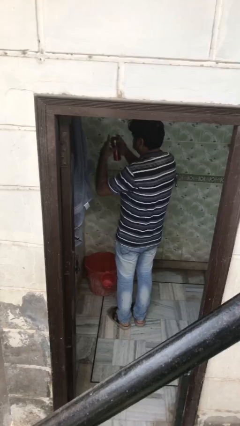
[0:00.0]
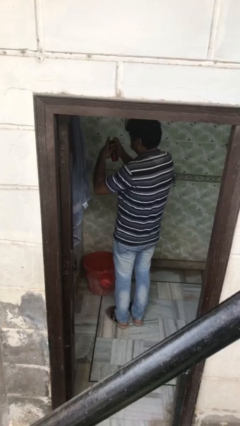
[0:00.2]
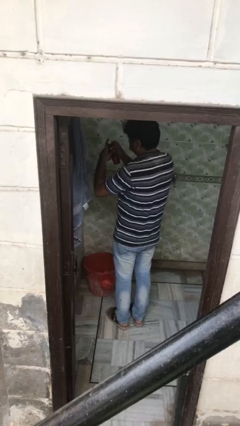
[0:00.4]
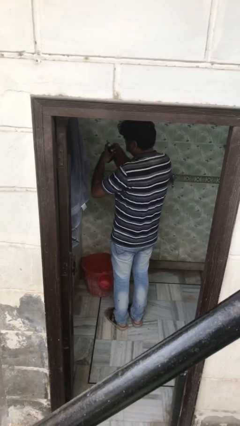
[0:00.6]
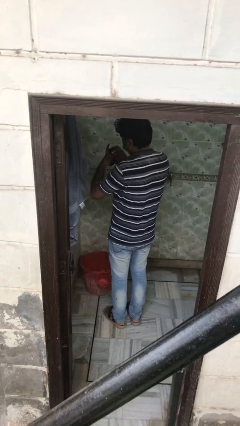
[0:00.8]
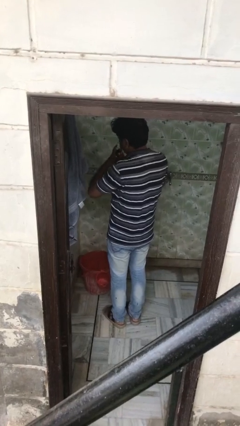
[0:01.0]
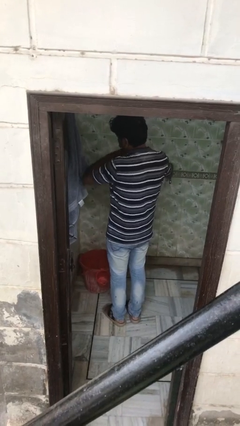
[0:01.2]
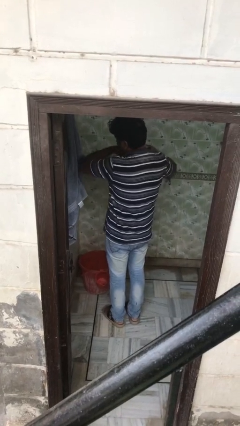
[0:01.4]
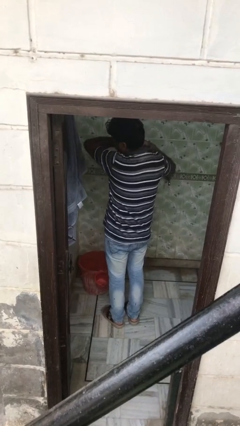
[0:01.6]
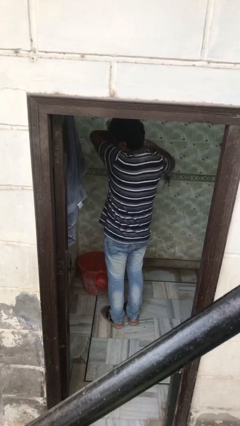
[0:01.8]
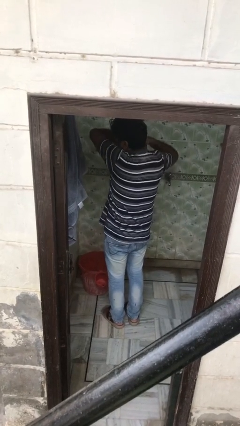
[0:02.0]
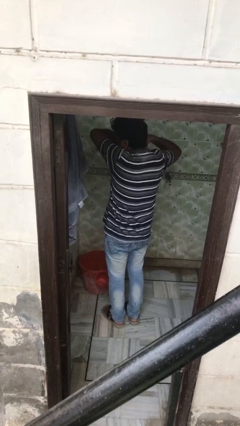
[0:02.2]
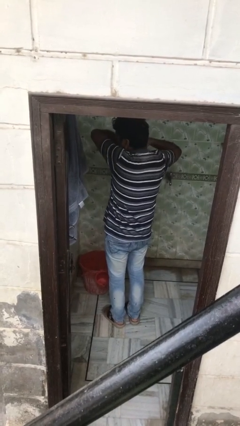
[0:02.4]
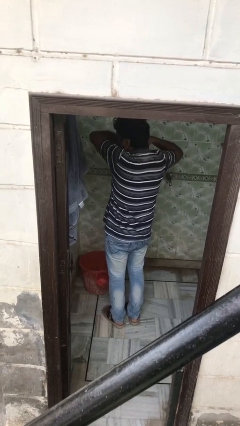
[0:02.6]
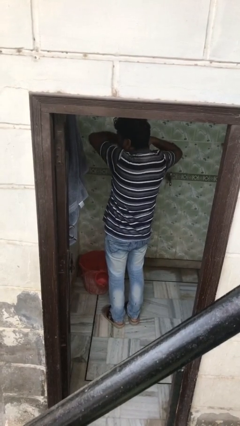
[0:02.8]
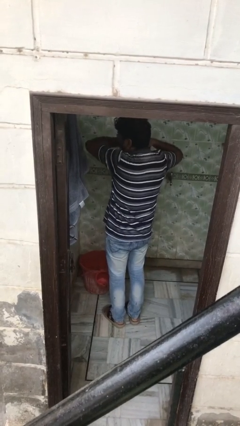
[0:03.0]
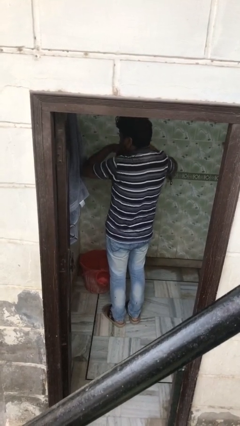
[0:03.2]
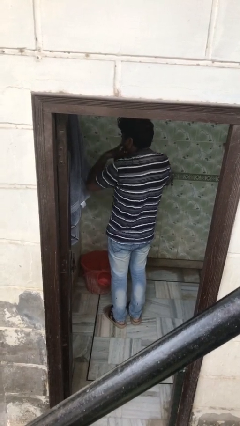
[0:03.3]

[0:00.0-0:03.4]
person applies deodorant

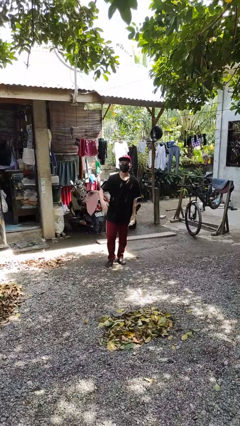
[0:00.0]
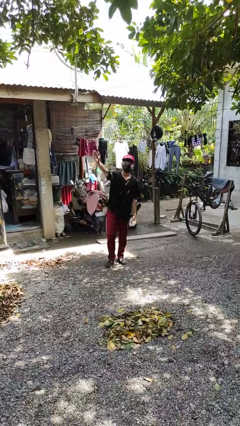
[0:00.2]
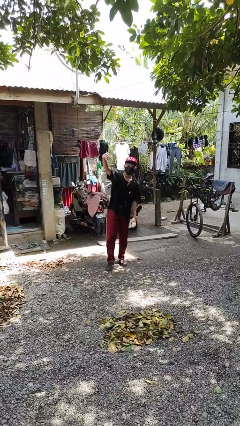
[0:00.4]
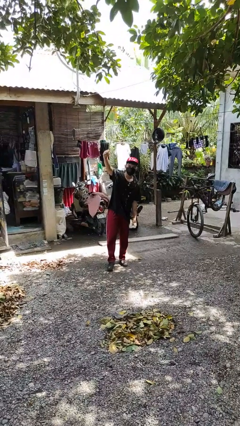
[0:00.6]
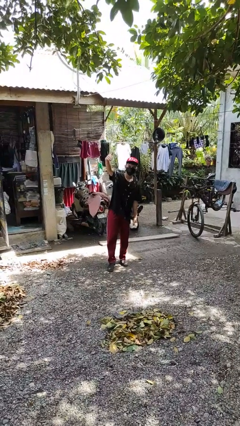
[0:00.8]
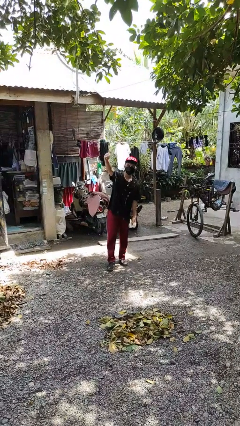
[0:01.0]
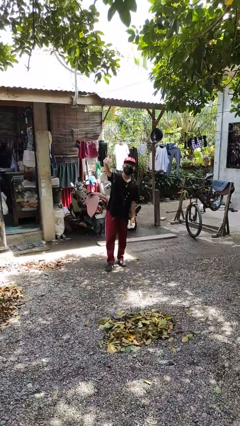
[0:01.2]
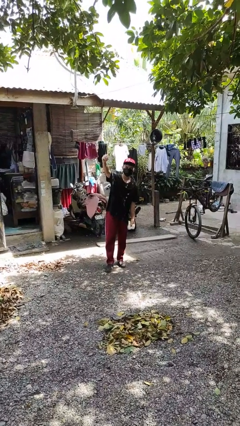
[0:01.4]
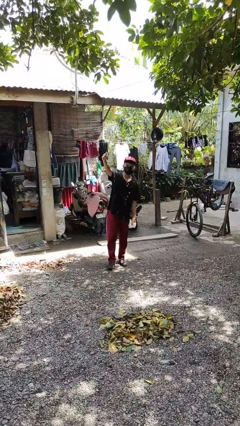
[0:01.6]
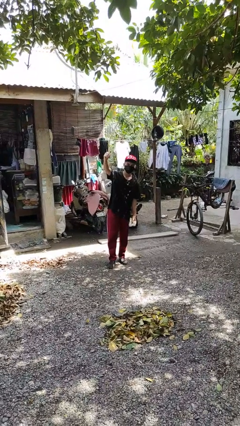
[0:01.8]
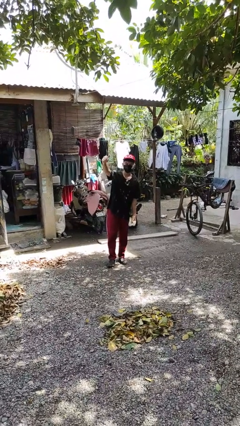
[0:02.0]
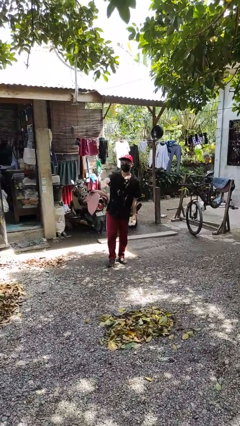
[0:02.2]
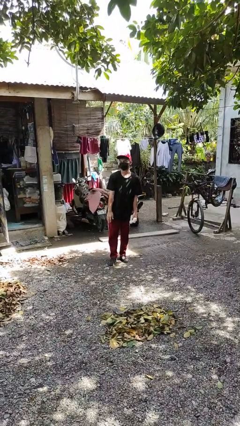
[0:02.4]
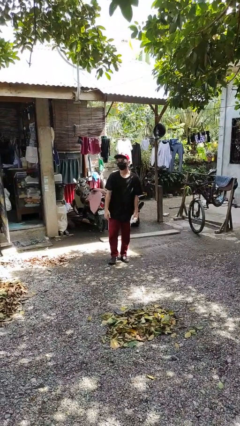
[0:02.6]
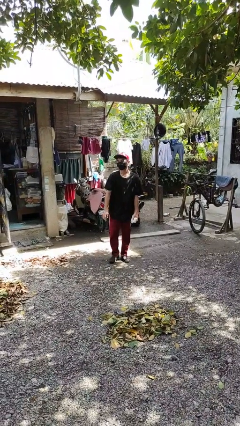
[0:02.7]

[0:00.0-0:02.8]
person gestures come here

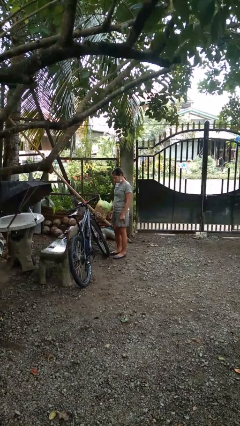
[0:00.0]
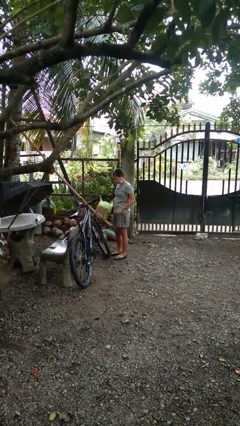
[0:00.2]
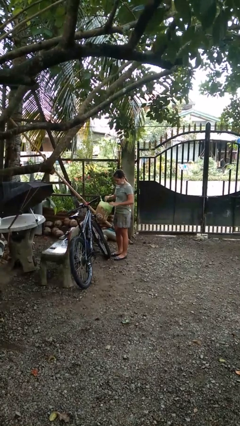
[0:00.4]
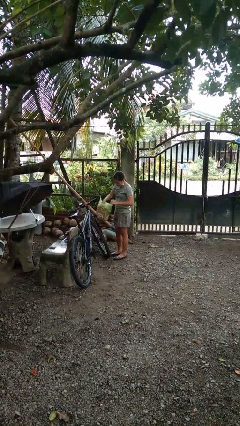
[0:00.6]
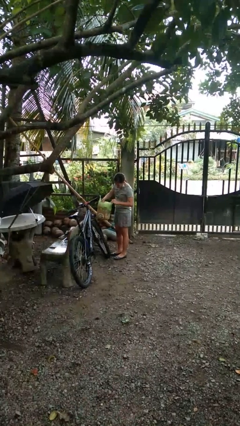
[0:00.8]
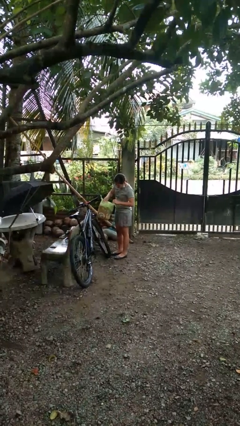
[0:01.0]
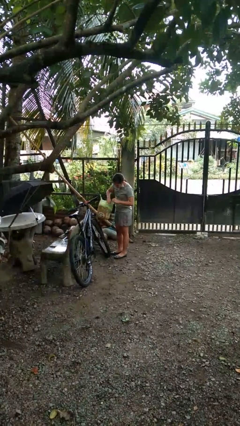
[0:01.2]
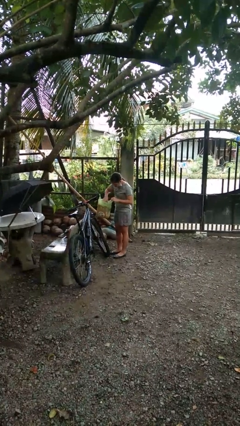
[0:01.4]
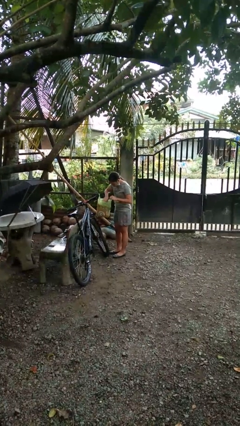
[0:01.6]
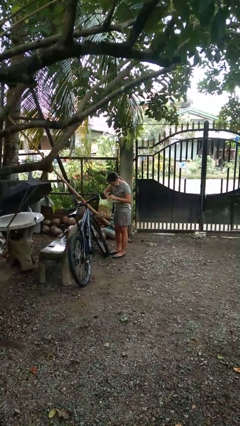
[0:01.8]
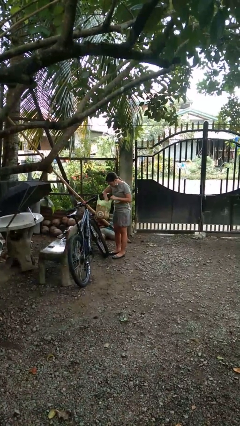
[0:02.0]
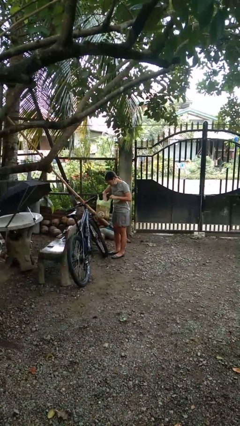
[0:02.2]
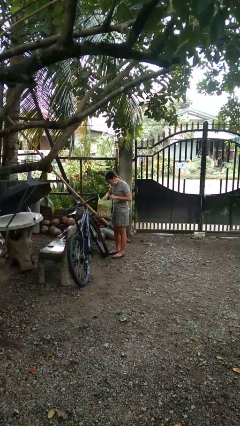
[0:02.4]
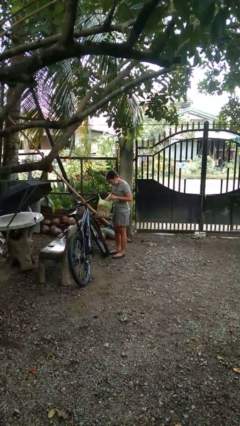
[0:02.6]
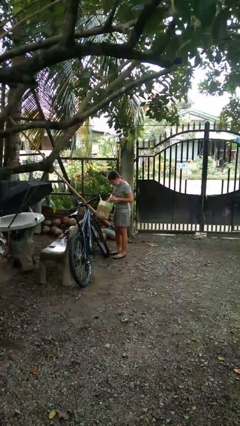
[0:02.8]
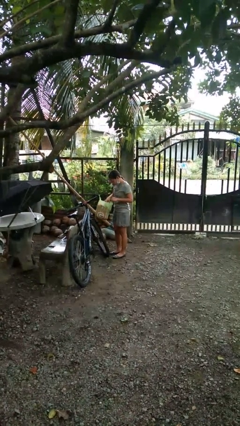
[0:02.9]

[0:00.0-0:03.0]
person searches in bag

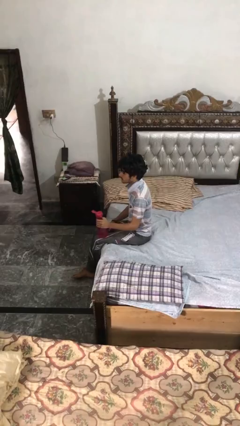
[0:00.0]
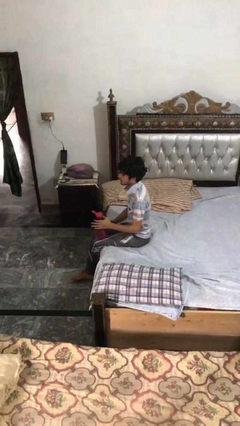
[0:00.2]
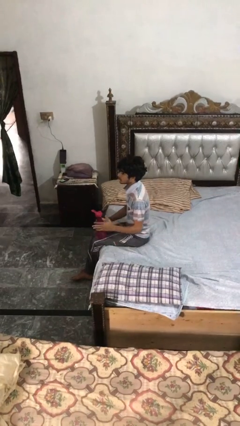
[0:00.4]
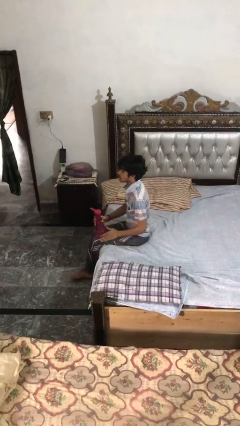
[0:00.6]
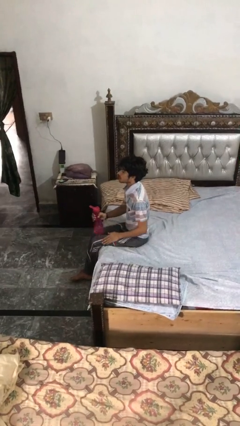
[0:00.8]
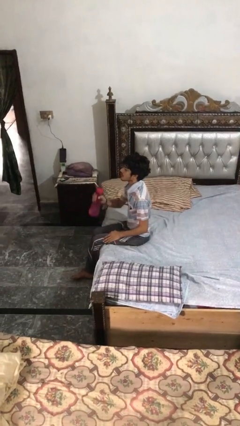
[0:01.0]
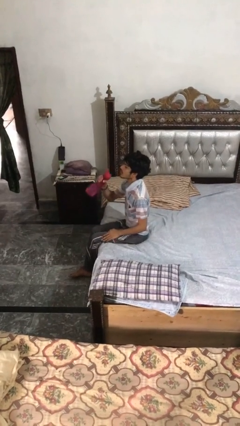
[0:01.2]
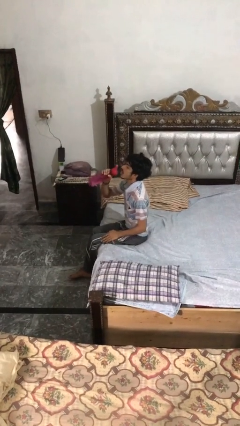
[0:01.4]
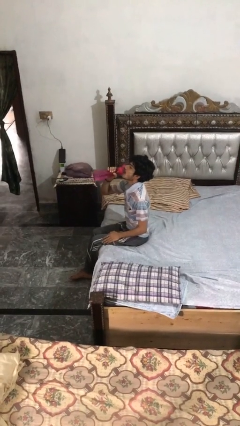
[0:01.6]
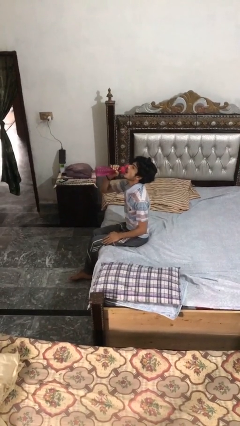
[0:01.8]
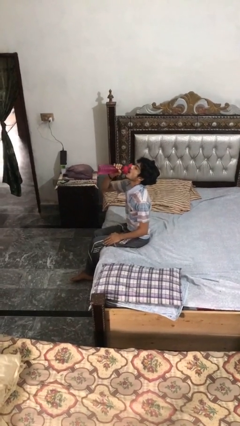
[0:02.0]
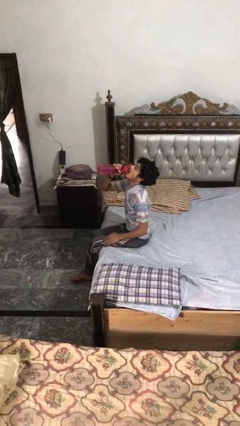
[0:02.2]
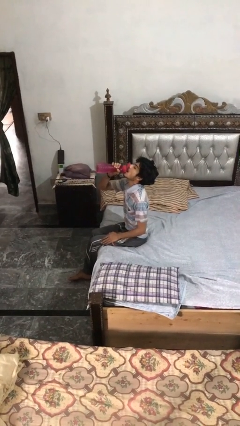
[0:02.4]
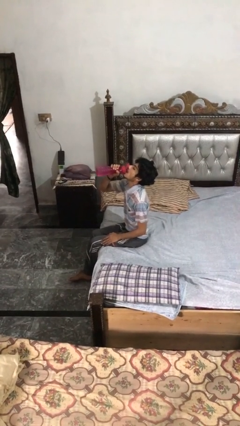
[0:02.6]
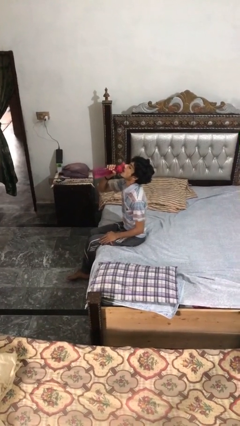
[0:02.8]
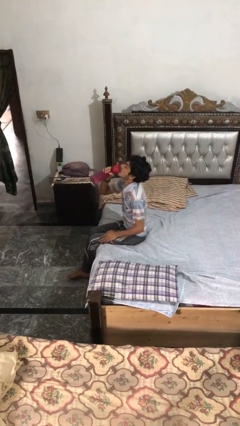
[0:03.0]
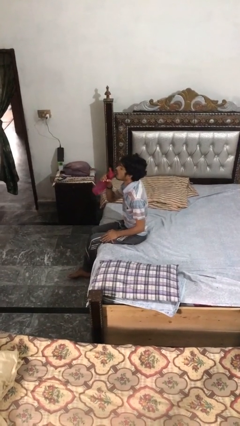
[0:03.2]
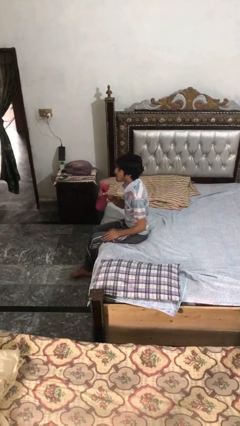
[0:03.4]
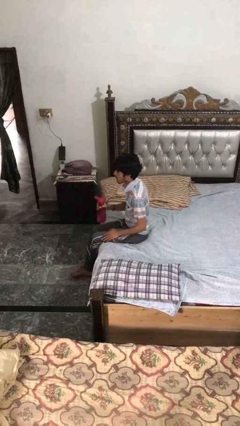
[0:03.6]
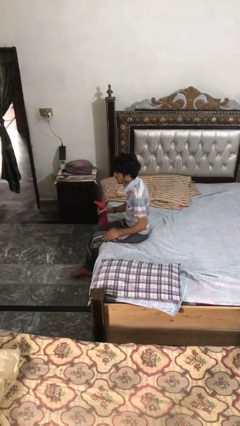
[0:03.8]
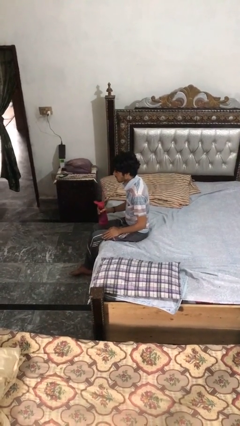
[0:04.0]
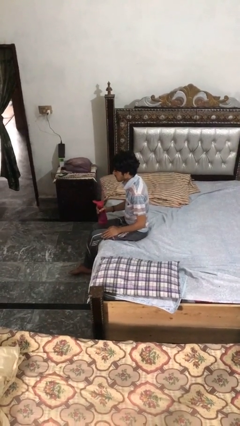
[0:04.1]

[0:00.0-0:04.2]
person drinks from bottle

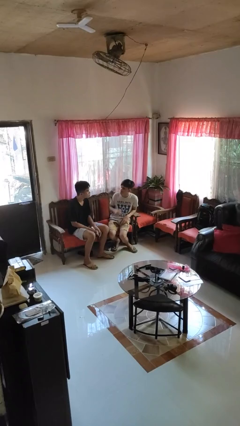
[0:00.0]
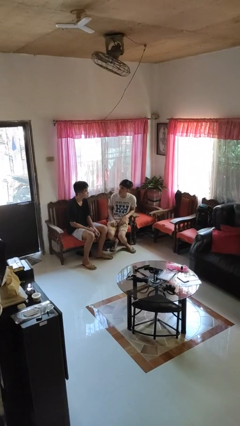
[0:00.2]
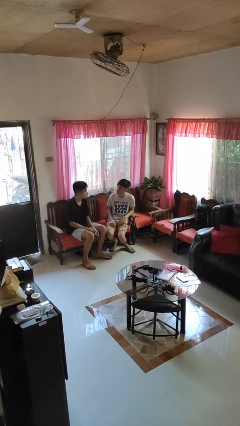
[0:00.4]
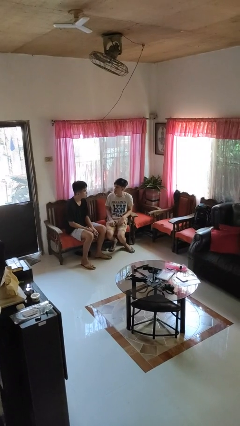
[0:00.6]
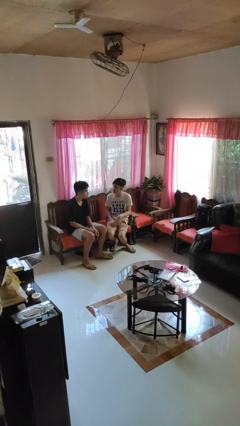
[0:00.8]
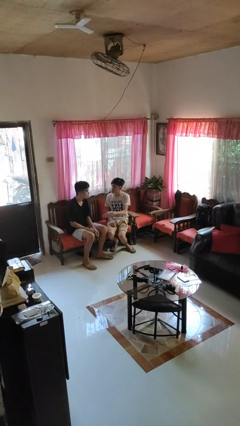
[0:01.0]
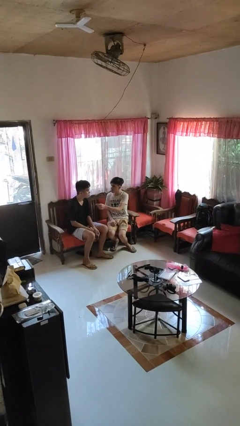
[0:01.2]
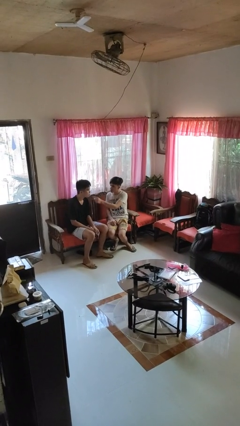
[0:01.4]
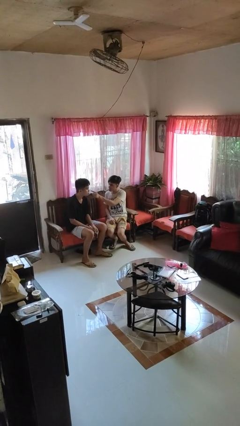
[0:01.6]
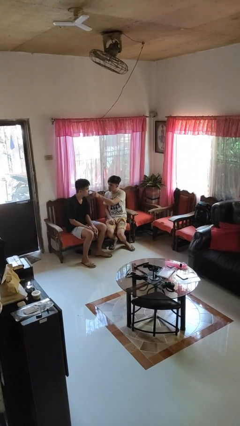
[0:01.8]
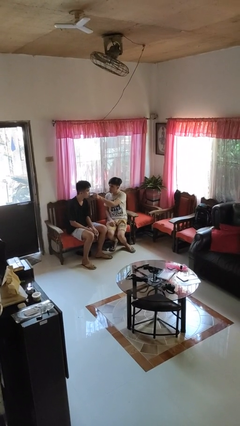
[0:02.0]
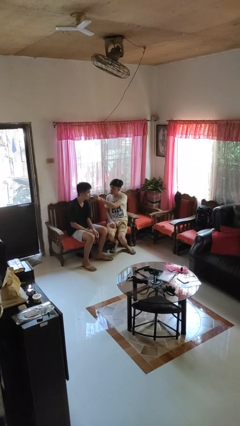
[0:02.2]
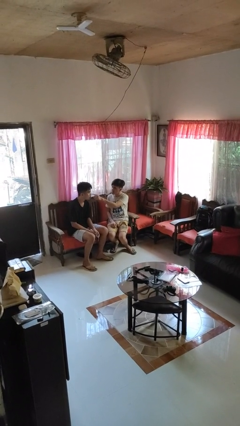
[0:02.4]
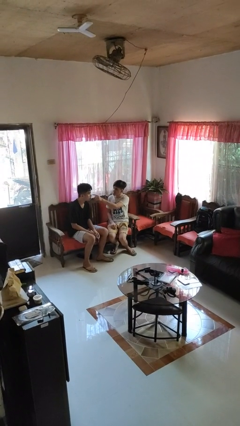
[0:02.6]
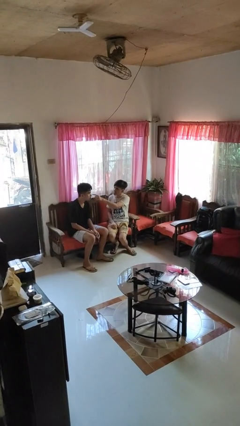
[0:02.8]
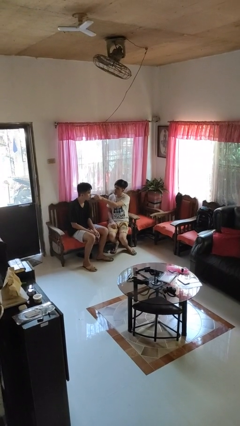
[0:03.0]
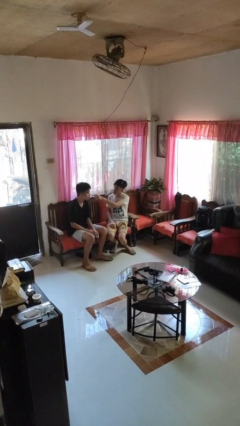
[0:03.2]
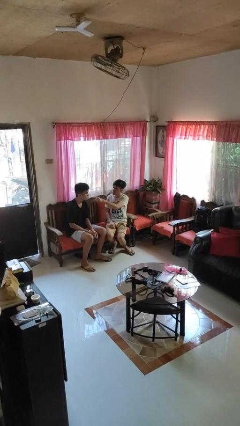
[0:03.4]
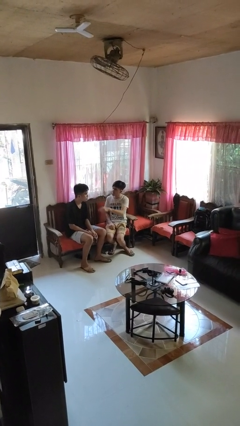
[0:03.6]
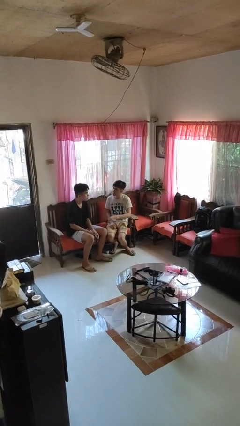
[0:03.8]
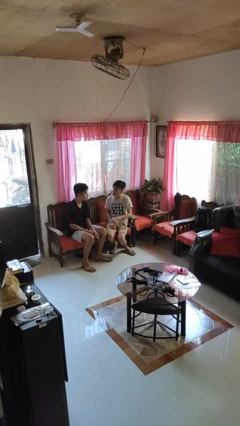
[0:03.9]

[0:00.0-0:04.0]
person touches face of person
